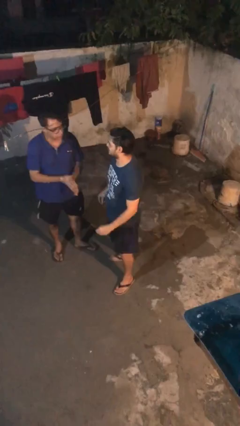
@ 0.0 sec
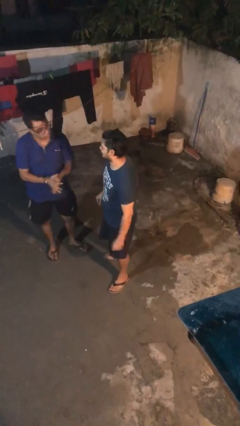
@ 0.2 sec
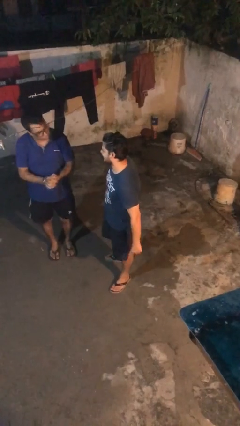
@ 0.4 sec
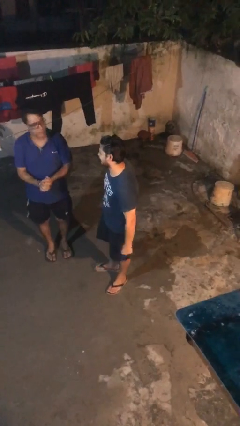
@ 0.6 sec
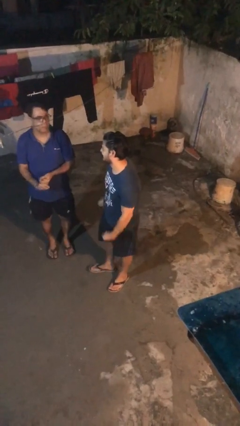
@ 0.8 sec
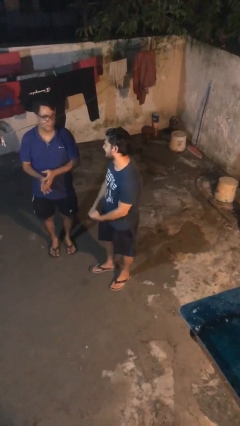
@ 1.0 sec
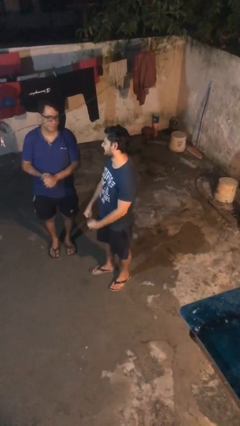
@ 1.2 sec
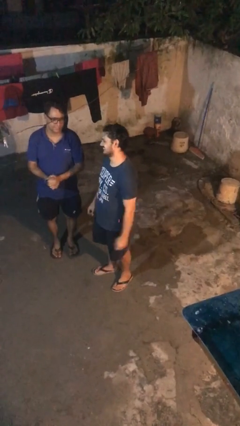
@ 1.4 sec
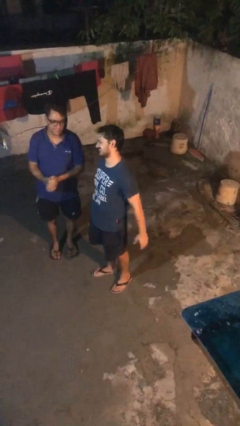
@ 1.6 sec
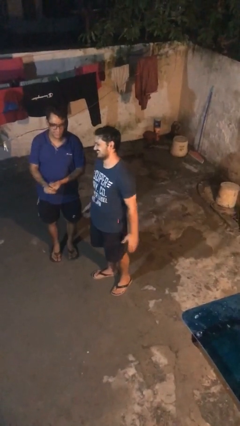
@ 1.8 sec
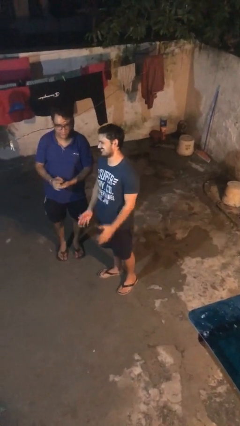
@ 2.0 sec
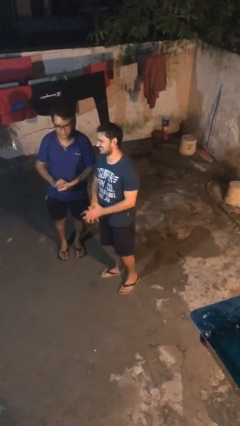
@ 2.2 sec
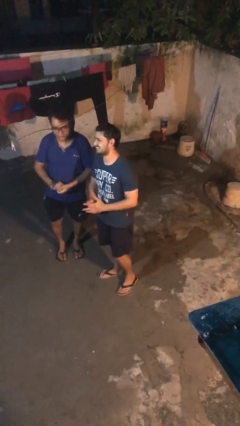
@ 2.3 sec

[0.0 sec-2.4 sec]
person talks to person

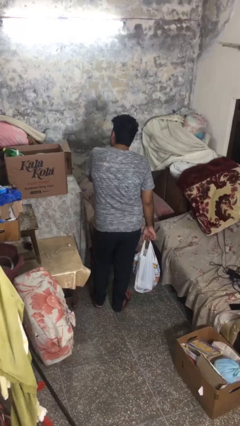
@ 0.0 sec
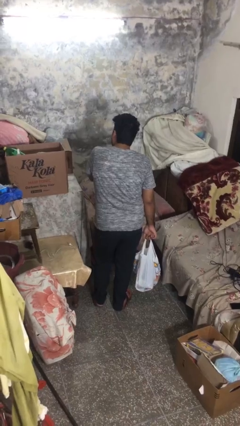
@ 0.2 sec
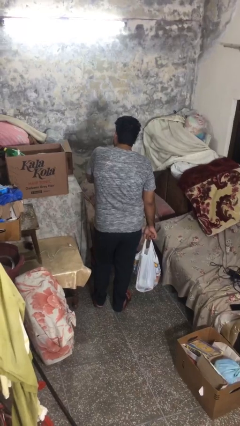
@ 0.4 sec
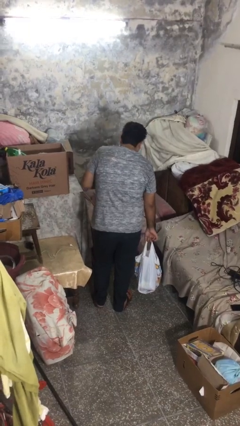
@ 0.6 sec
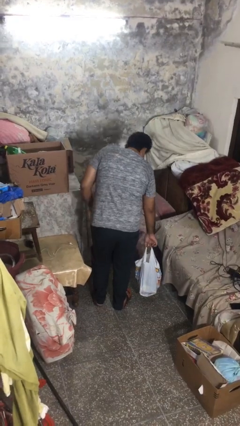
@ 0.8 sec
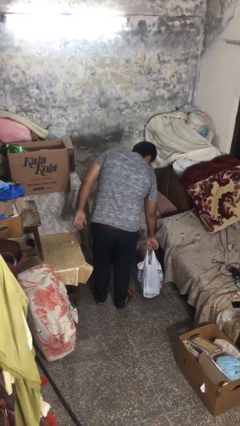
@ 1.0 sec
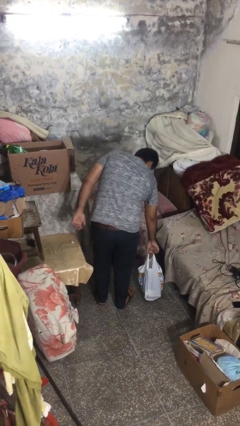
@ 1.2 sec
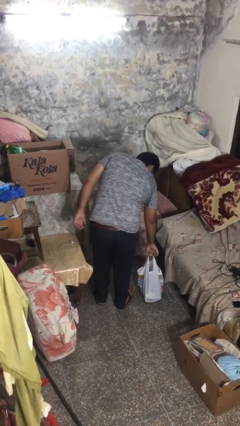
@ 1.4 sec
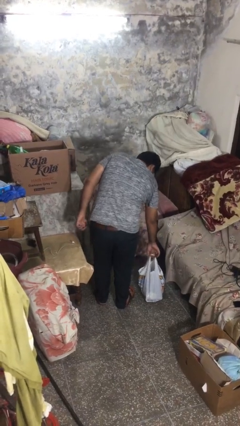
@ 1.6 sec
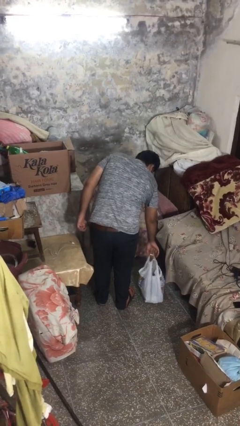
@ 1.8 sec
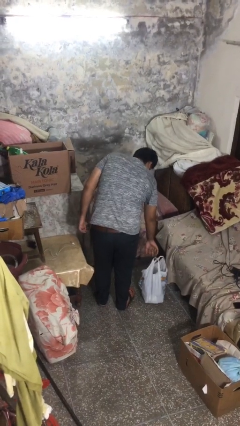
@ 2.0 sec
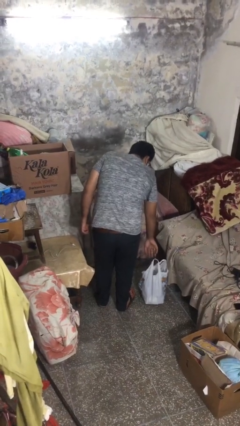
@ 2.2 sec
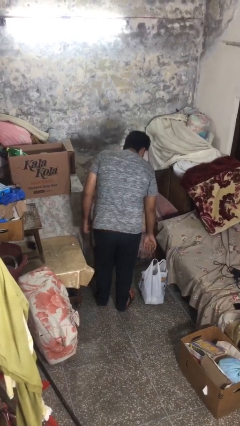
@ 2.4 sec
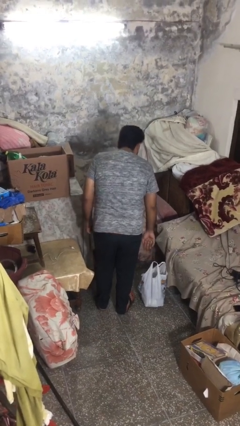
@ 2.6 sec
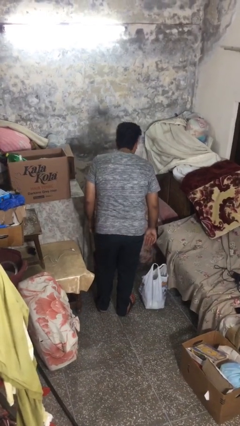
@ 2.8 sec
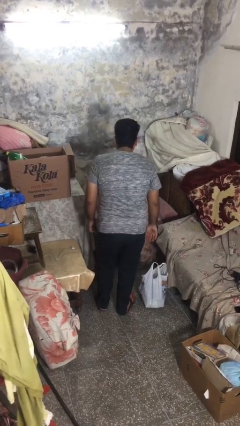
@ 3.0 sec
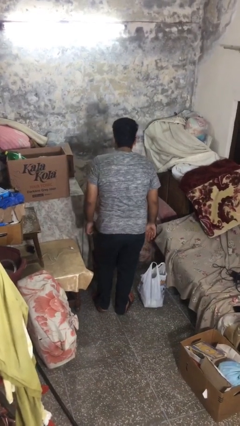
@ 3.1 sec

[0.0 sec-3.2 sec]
person puts down object on floor

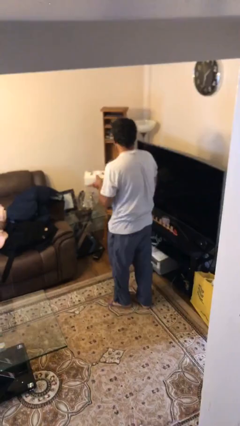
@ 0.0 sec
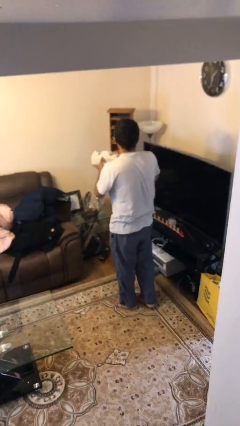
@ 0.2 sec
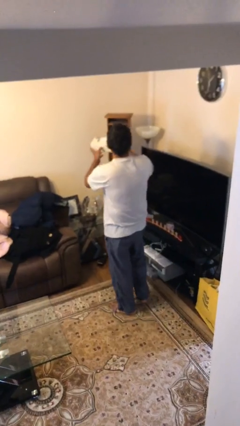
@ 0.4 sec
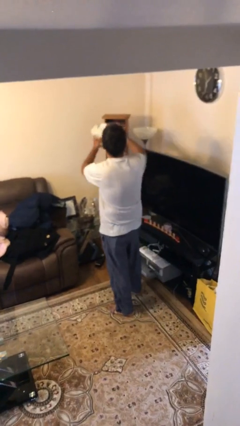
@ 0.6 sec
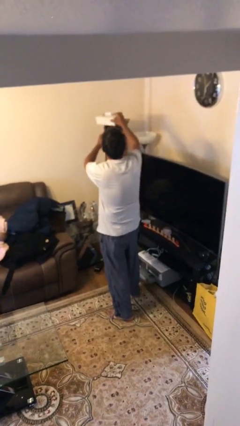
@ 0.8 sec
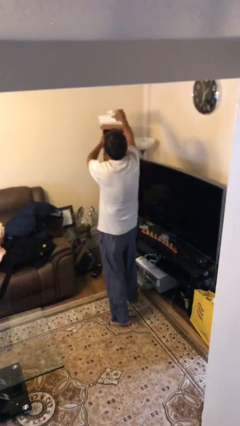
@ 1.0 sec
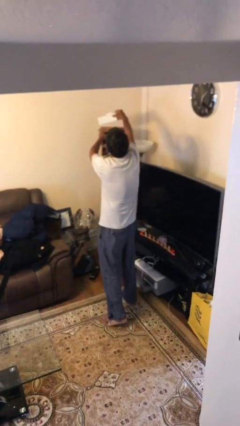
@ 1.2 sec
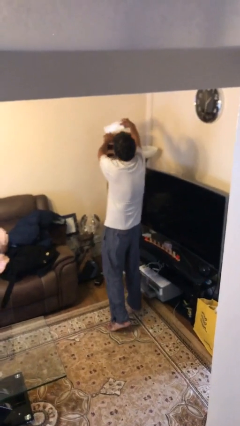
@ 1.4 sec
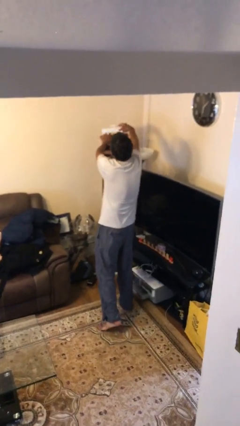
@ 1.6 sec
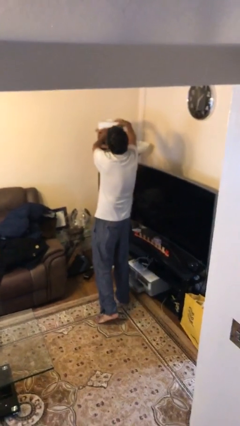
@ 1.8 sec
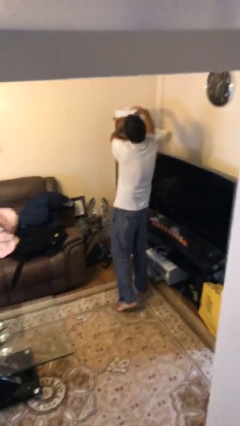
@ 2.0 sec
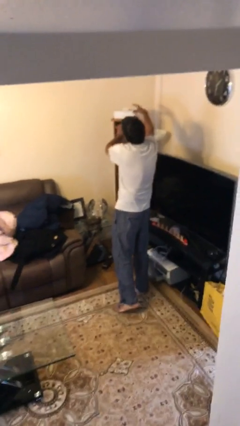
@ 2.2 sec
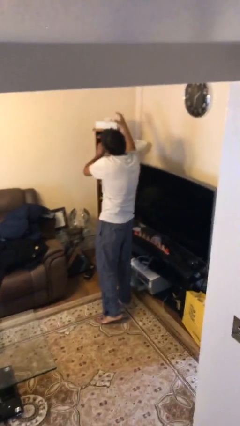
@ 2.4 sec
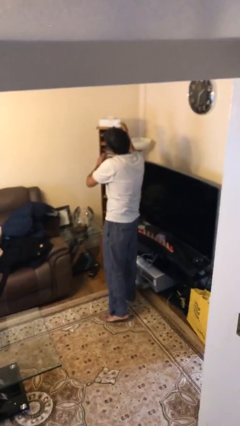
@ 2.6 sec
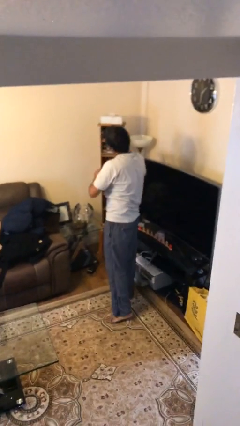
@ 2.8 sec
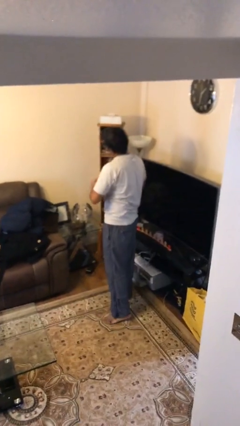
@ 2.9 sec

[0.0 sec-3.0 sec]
person puts down object on shelf

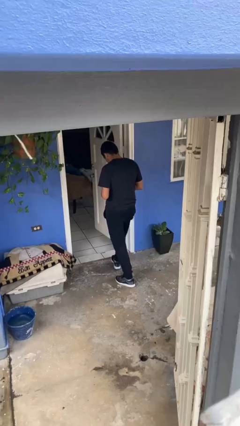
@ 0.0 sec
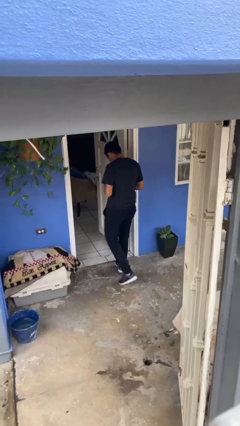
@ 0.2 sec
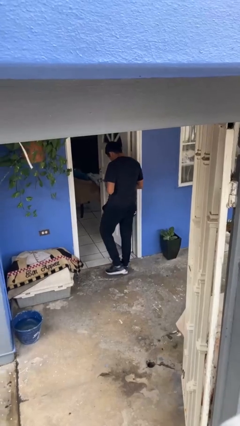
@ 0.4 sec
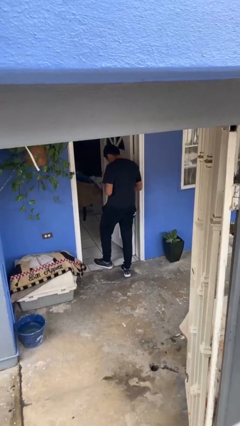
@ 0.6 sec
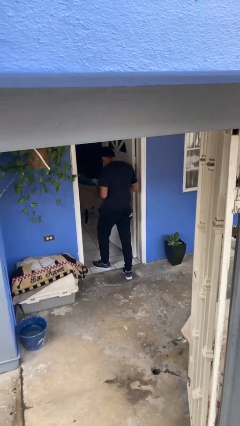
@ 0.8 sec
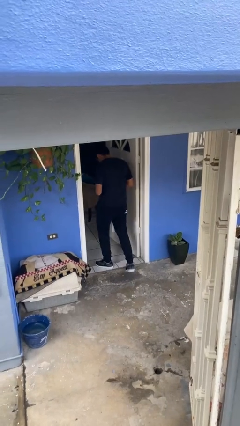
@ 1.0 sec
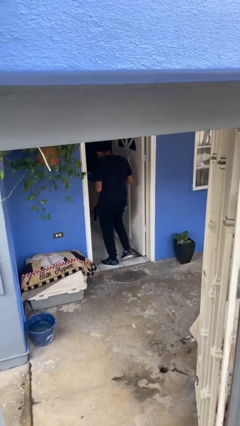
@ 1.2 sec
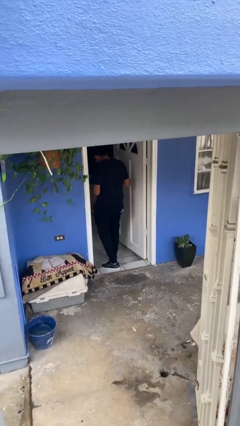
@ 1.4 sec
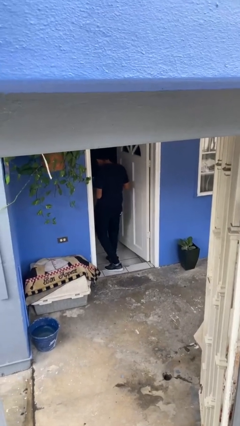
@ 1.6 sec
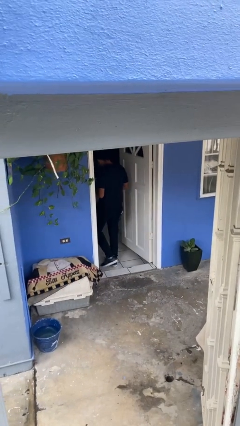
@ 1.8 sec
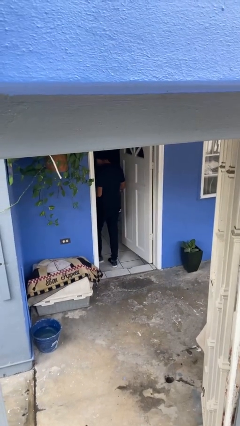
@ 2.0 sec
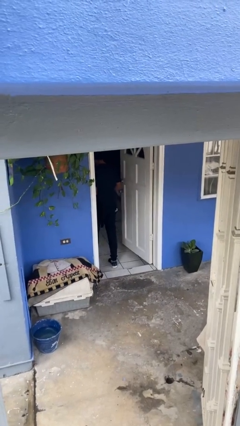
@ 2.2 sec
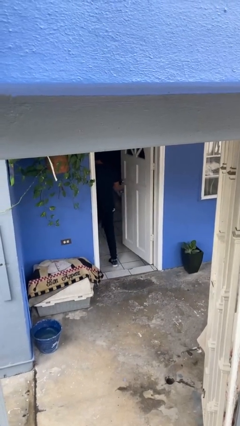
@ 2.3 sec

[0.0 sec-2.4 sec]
person exits scene through structure

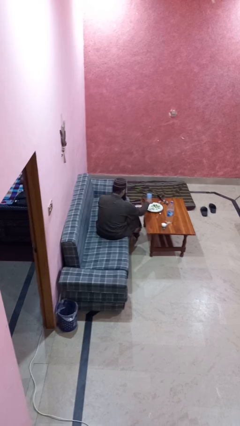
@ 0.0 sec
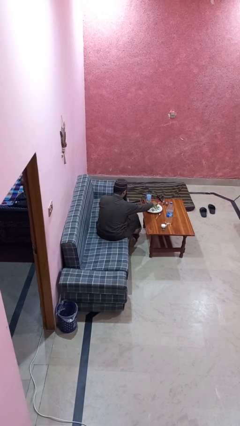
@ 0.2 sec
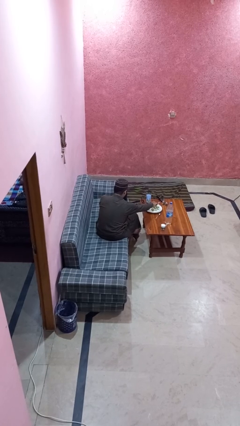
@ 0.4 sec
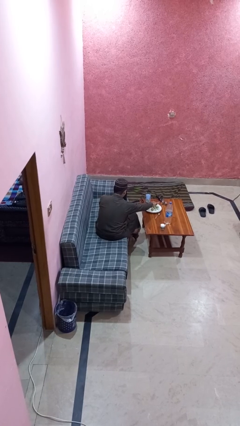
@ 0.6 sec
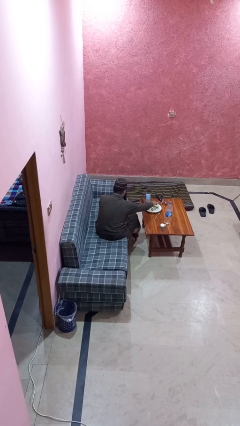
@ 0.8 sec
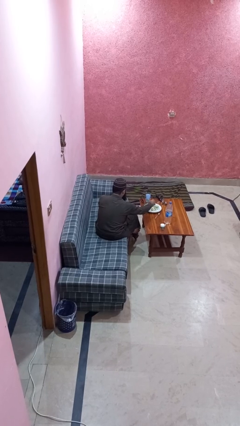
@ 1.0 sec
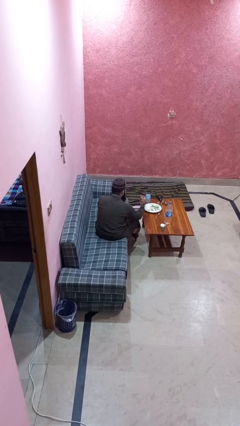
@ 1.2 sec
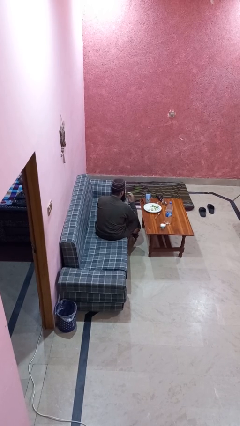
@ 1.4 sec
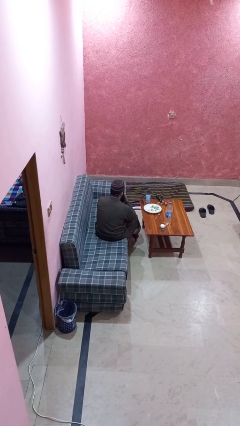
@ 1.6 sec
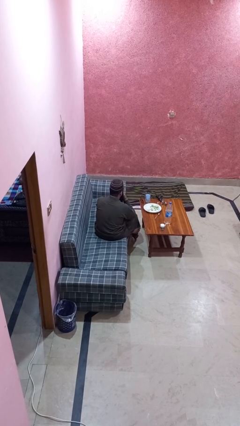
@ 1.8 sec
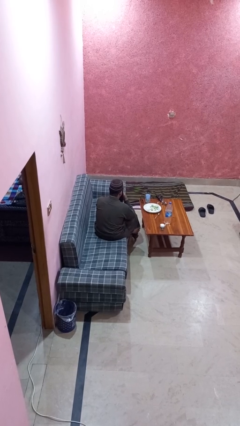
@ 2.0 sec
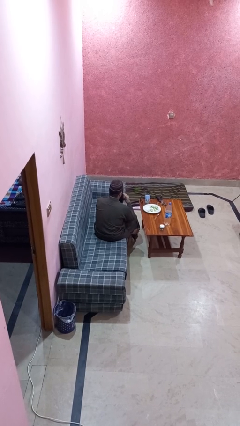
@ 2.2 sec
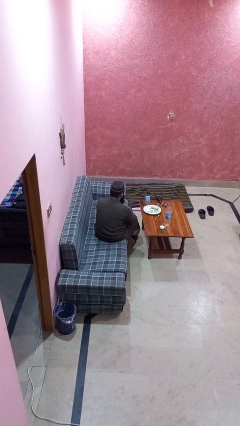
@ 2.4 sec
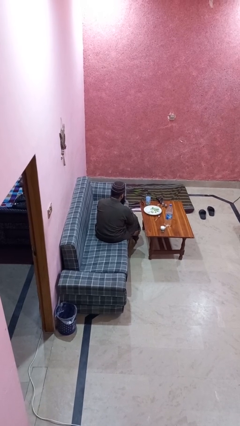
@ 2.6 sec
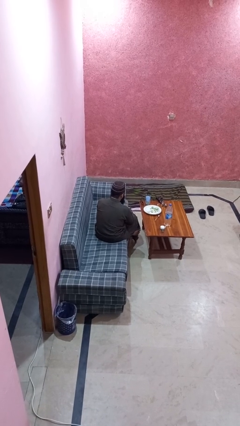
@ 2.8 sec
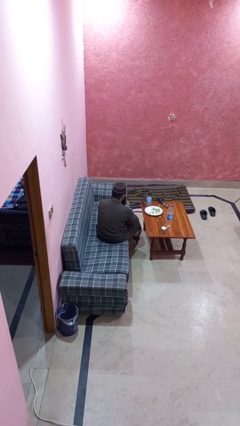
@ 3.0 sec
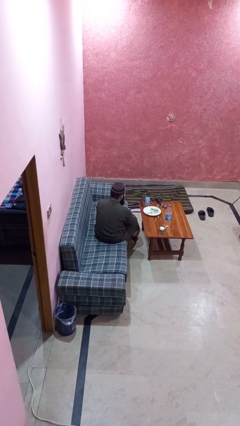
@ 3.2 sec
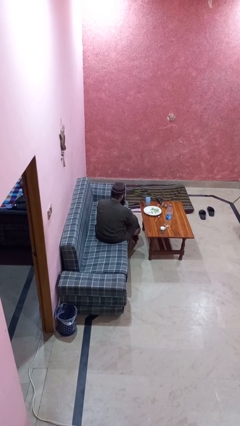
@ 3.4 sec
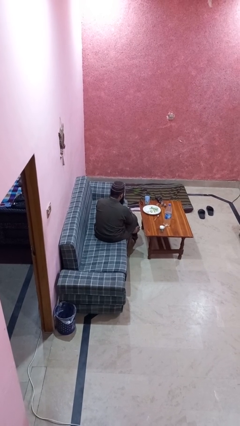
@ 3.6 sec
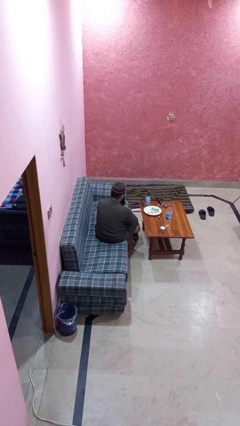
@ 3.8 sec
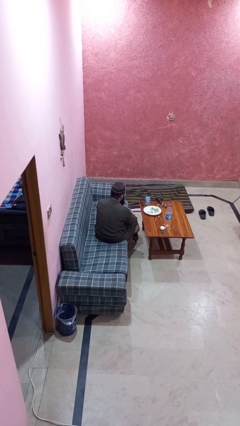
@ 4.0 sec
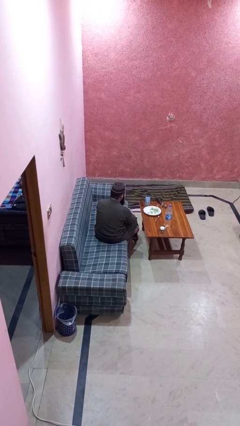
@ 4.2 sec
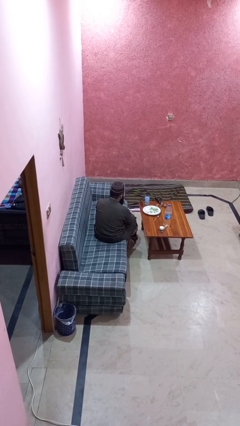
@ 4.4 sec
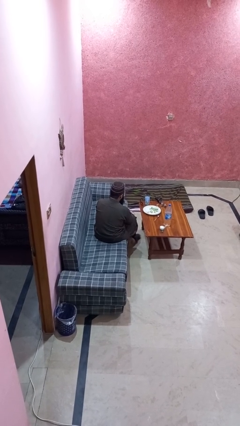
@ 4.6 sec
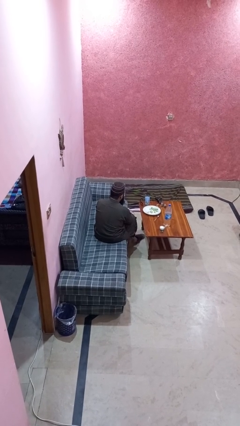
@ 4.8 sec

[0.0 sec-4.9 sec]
person eats with hands

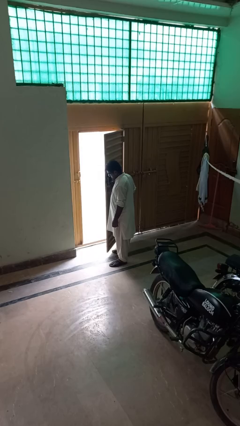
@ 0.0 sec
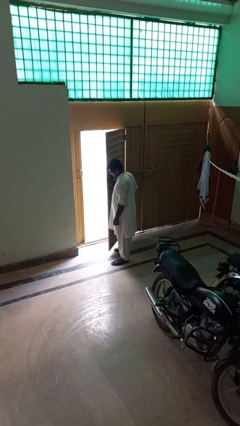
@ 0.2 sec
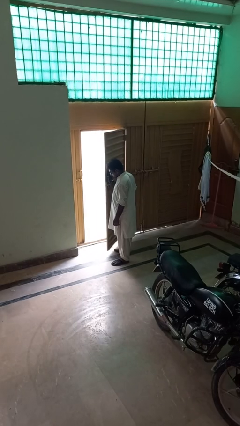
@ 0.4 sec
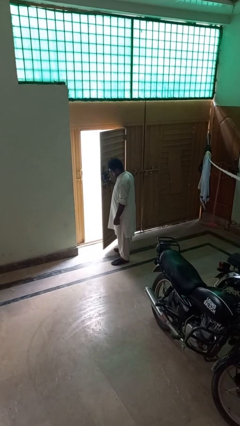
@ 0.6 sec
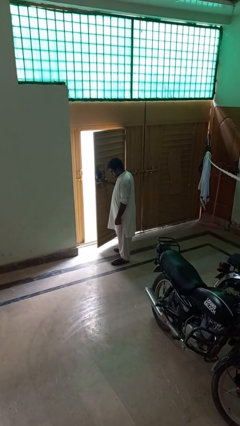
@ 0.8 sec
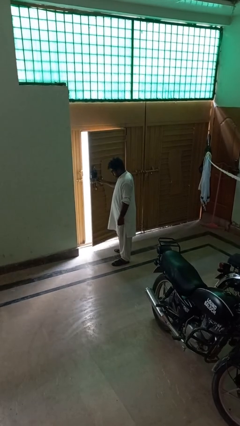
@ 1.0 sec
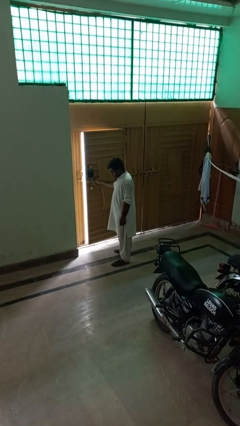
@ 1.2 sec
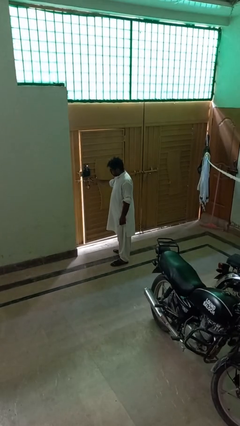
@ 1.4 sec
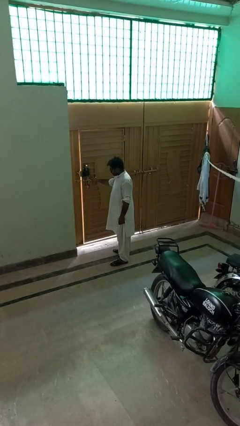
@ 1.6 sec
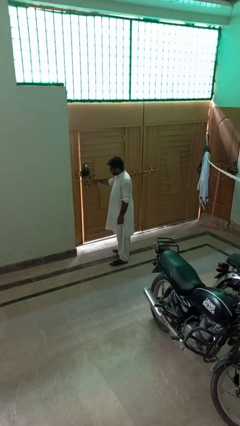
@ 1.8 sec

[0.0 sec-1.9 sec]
person closes gate
